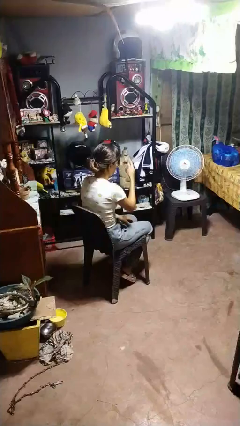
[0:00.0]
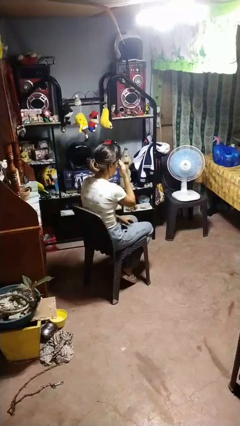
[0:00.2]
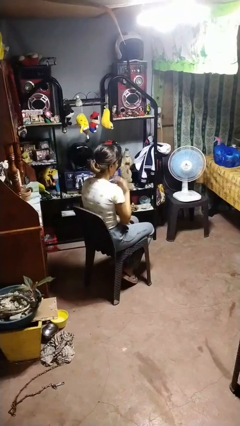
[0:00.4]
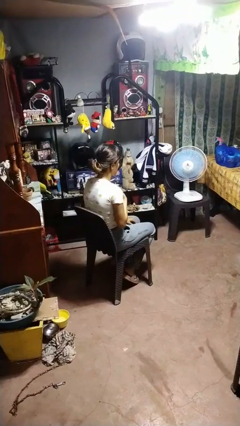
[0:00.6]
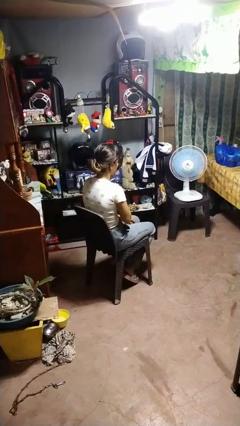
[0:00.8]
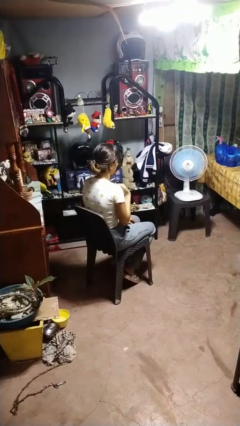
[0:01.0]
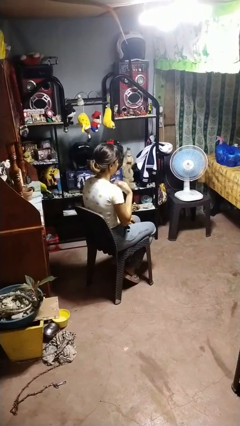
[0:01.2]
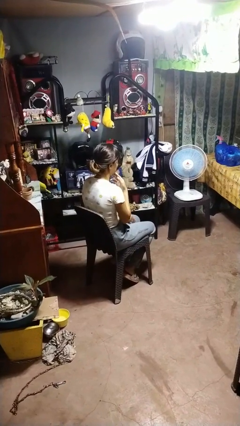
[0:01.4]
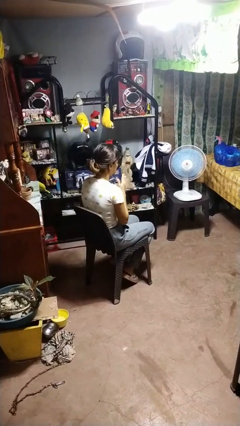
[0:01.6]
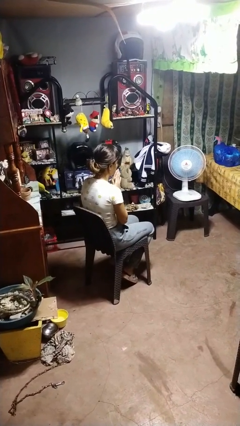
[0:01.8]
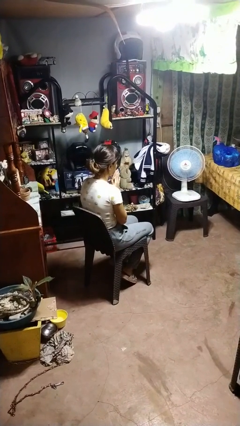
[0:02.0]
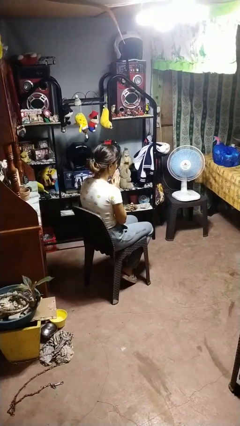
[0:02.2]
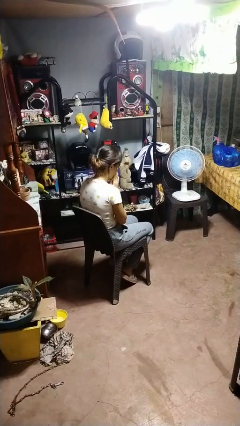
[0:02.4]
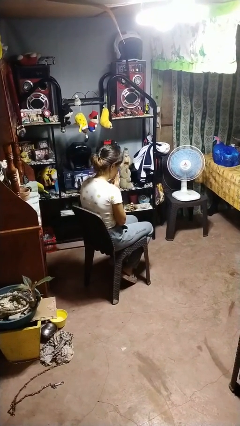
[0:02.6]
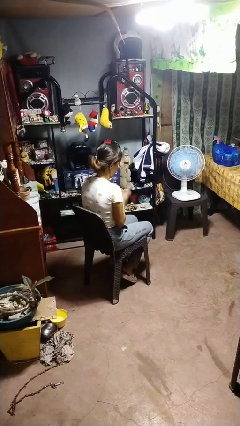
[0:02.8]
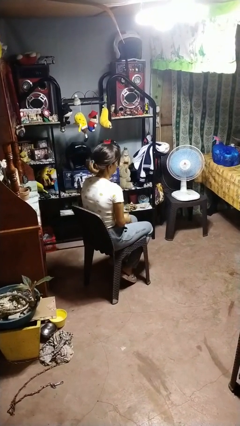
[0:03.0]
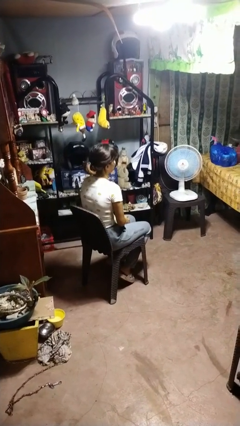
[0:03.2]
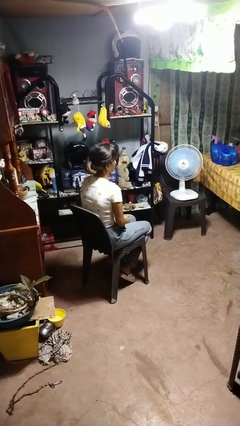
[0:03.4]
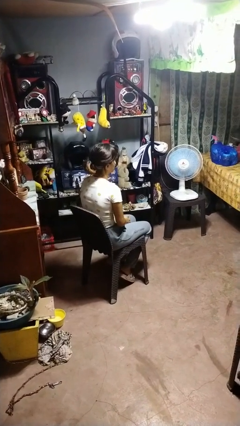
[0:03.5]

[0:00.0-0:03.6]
person prays

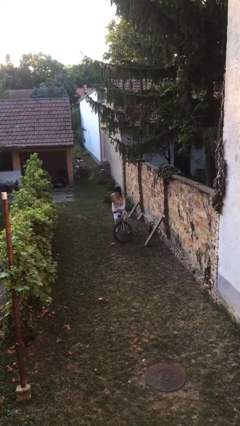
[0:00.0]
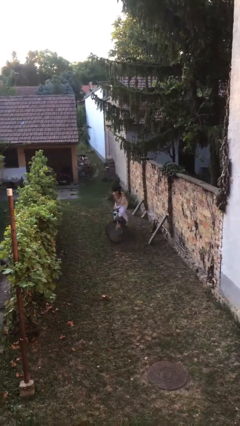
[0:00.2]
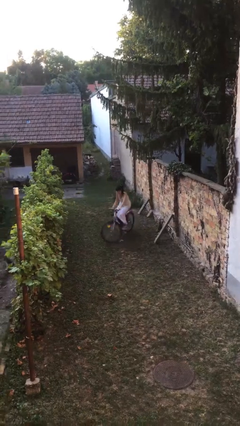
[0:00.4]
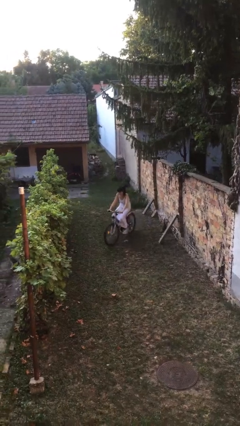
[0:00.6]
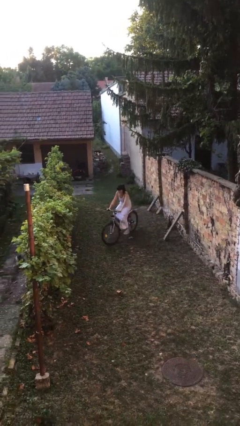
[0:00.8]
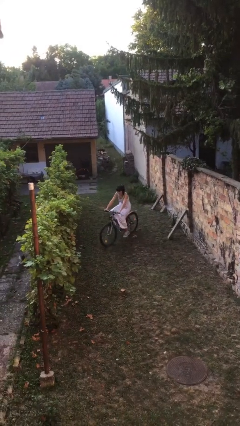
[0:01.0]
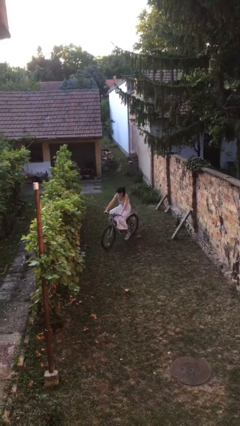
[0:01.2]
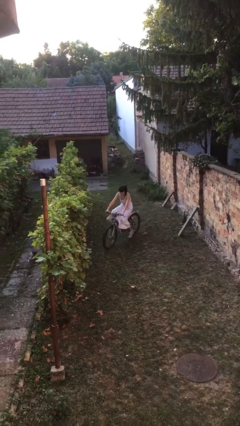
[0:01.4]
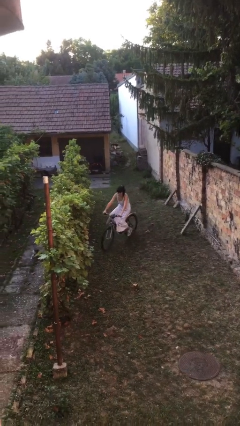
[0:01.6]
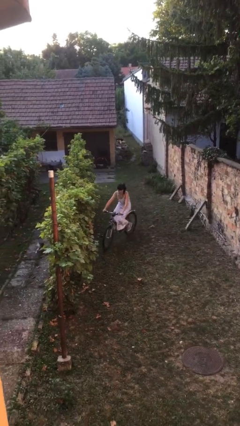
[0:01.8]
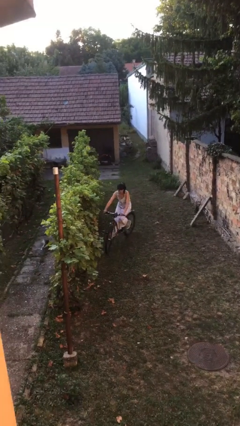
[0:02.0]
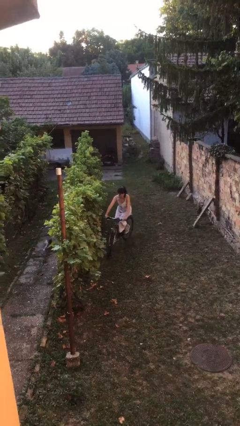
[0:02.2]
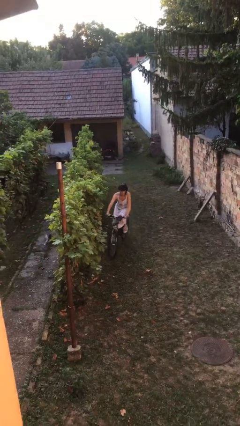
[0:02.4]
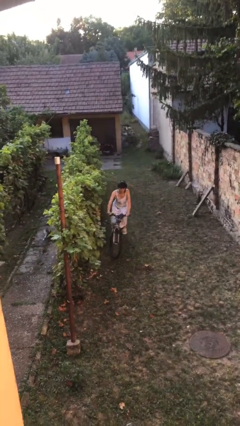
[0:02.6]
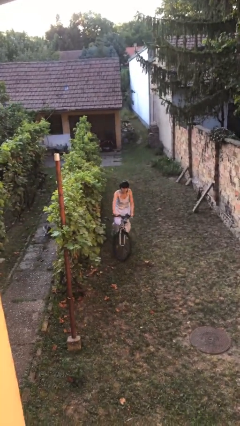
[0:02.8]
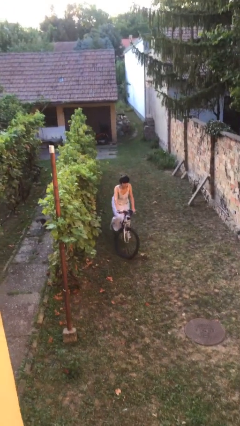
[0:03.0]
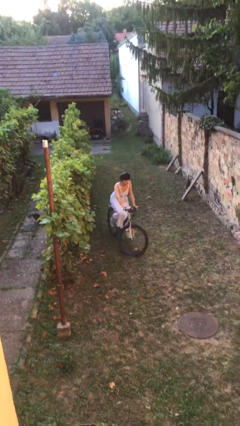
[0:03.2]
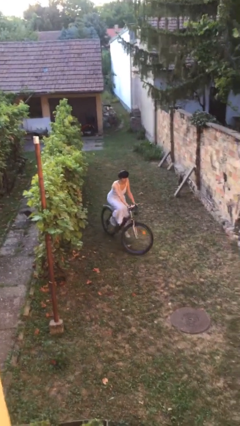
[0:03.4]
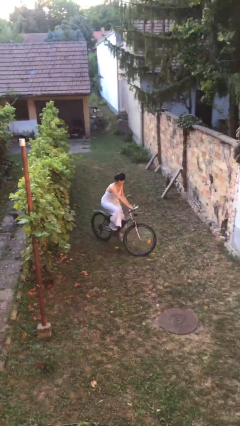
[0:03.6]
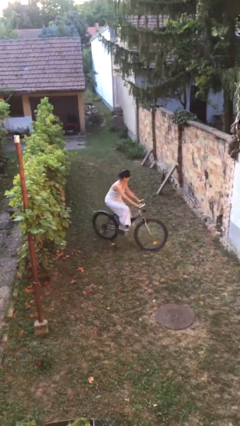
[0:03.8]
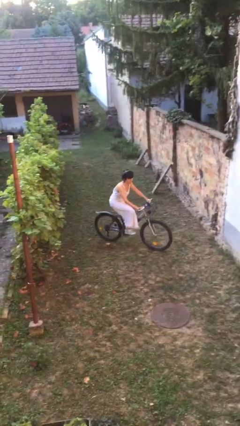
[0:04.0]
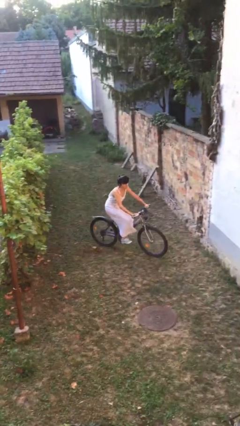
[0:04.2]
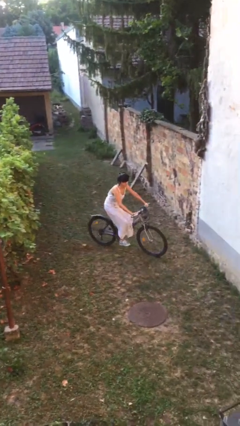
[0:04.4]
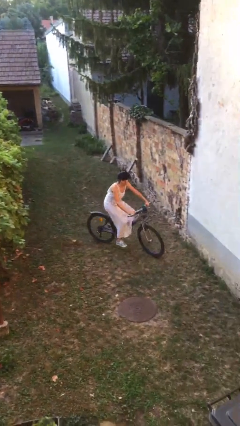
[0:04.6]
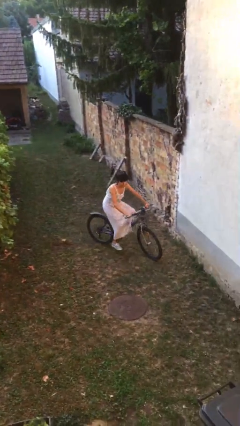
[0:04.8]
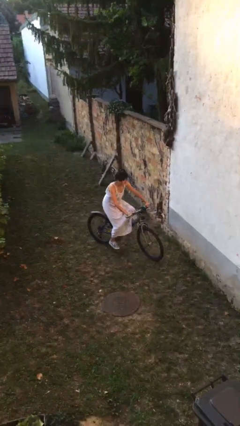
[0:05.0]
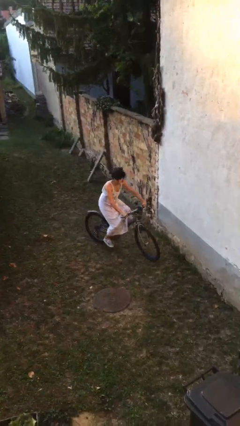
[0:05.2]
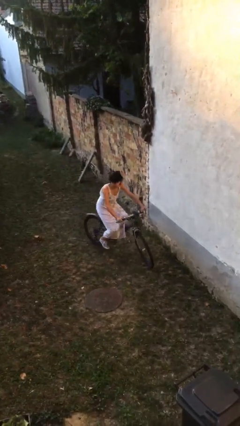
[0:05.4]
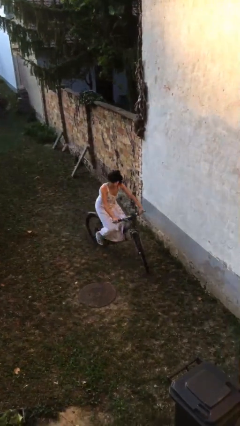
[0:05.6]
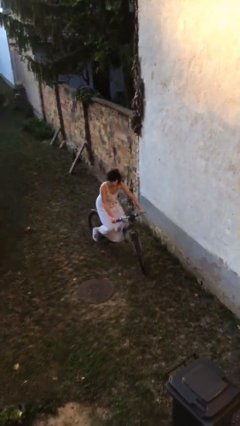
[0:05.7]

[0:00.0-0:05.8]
person rides bicycle

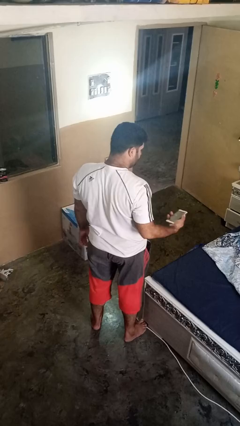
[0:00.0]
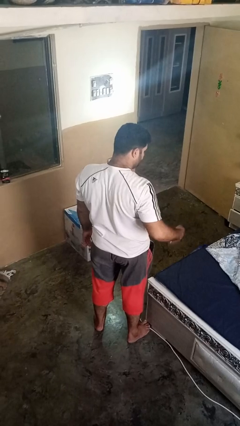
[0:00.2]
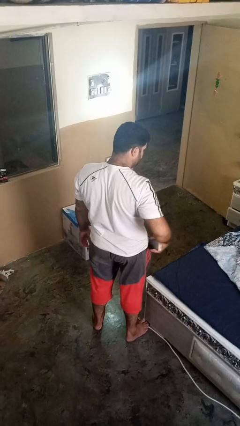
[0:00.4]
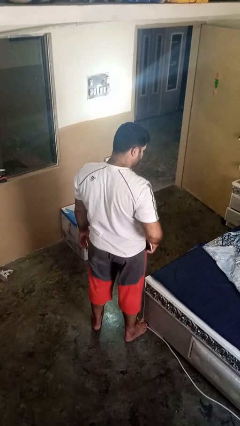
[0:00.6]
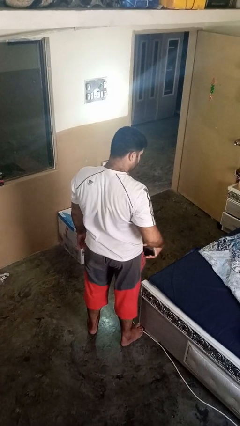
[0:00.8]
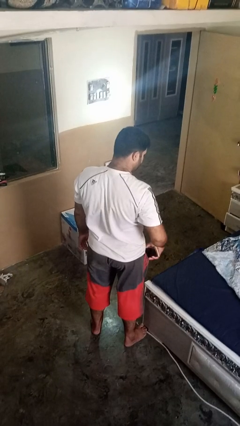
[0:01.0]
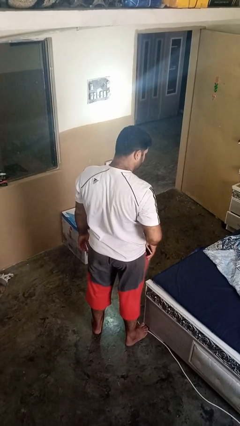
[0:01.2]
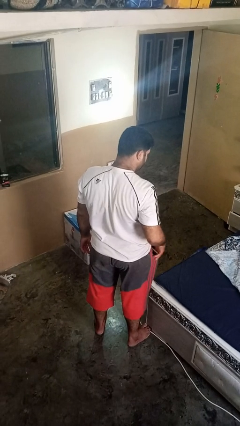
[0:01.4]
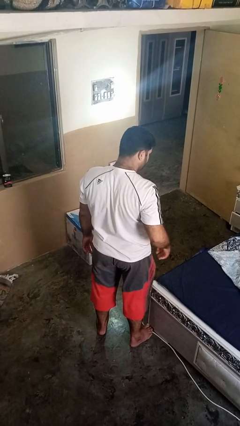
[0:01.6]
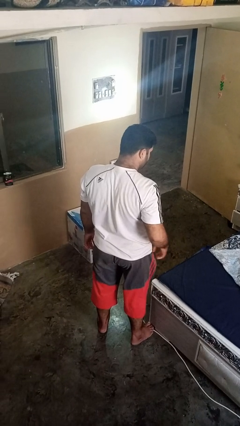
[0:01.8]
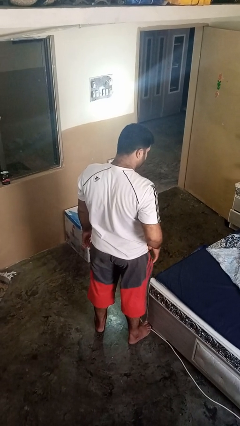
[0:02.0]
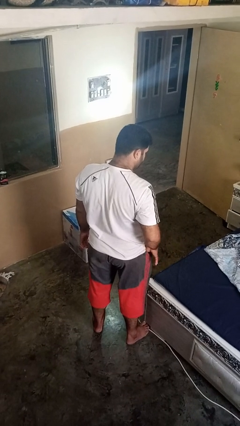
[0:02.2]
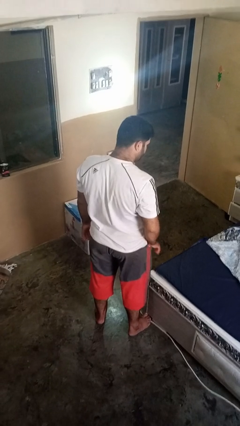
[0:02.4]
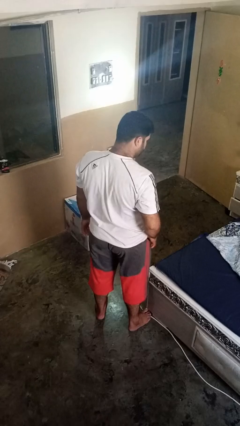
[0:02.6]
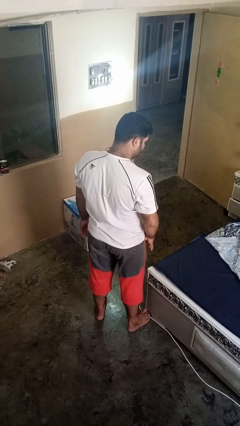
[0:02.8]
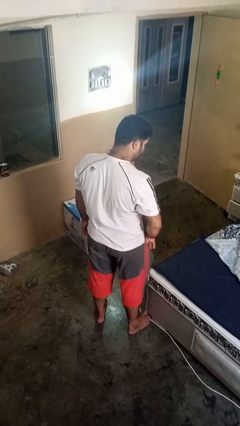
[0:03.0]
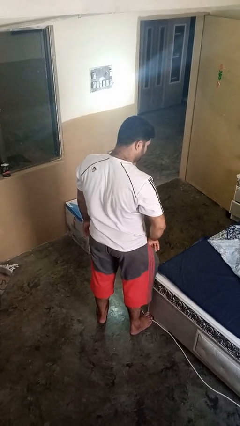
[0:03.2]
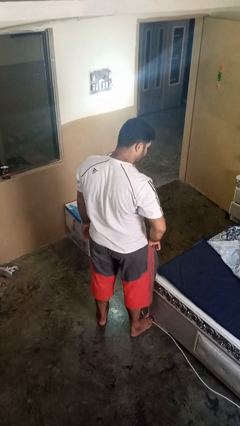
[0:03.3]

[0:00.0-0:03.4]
person puts phone into pocket

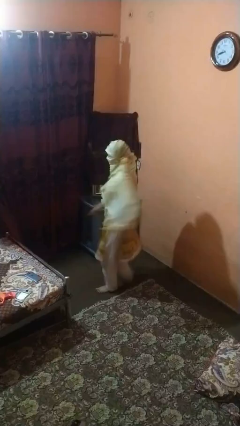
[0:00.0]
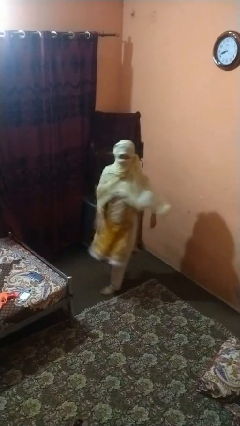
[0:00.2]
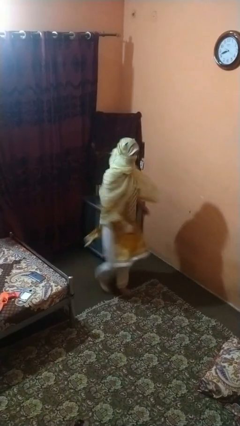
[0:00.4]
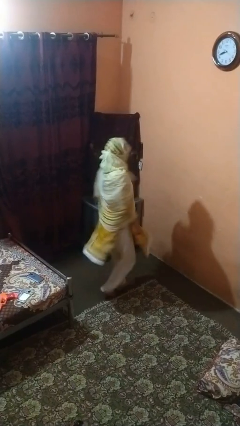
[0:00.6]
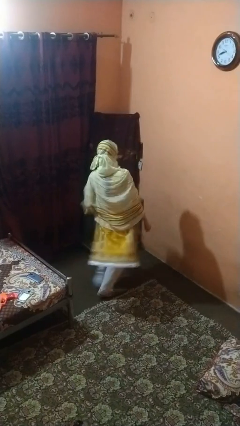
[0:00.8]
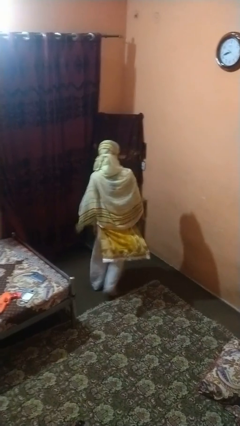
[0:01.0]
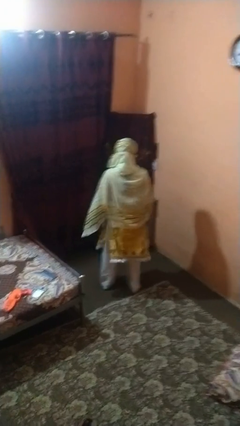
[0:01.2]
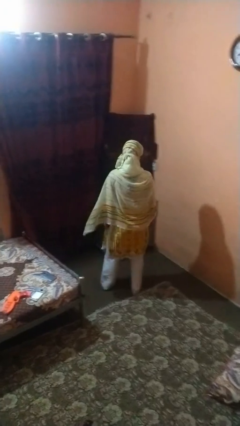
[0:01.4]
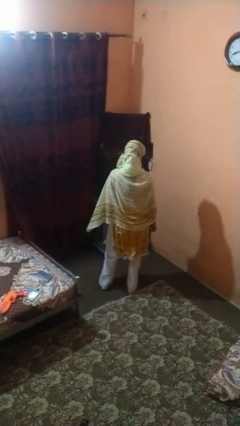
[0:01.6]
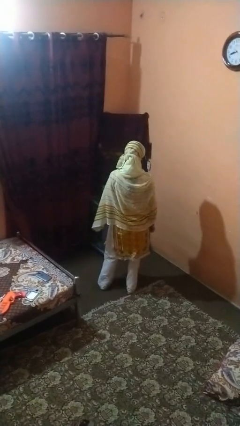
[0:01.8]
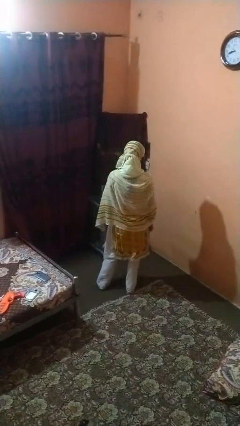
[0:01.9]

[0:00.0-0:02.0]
person twirls

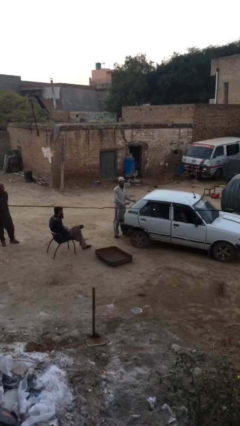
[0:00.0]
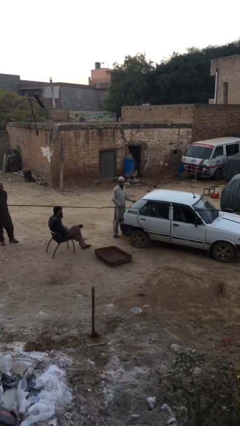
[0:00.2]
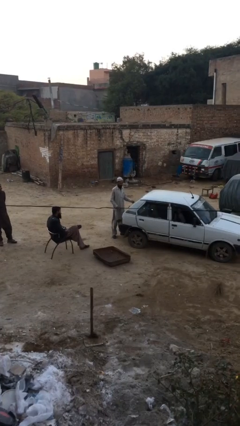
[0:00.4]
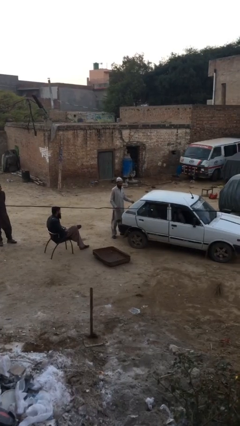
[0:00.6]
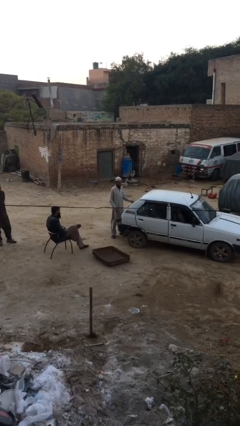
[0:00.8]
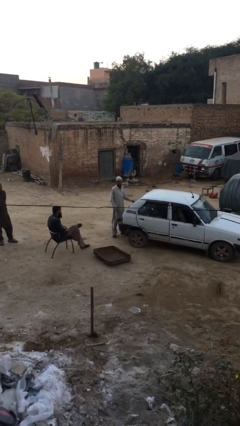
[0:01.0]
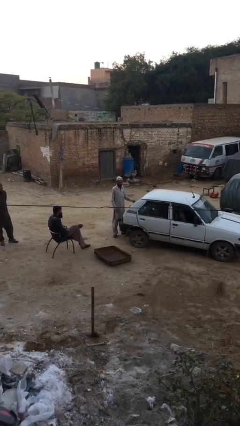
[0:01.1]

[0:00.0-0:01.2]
person closes car trunk

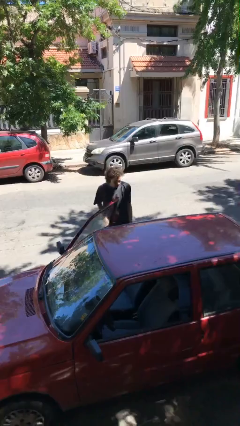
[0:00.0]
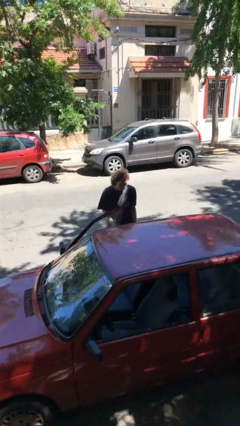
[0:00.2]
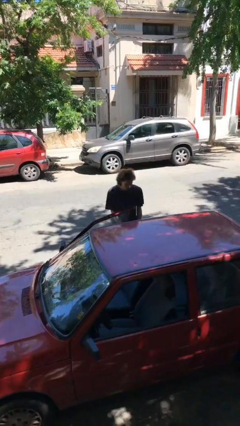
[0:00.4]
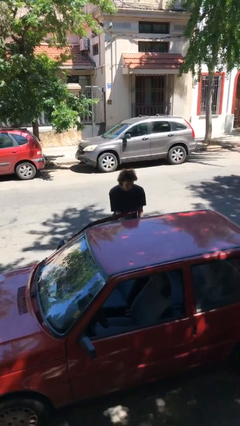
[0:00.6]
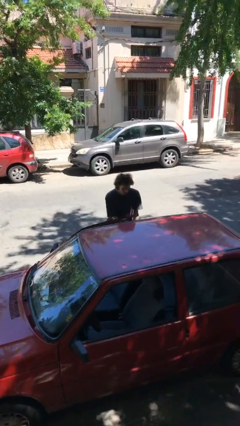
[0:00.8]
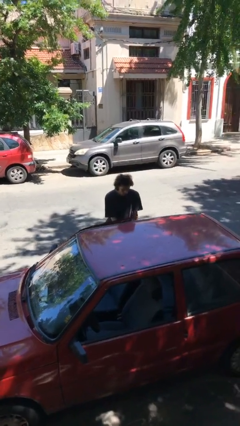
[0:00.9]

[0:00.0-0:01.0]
person closes car door

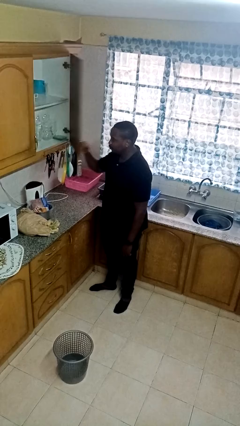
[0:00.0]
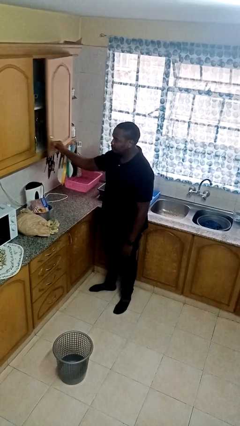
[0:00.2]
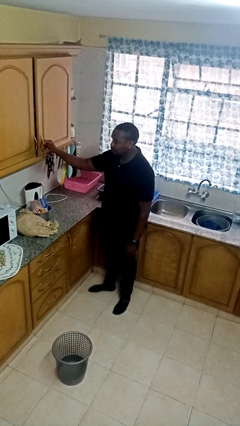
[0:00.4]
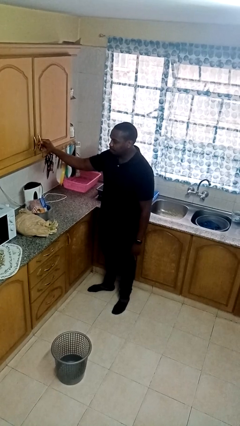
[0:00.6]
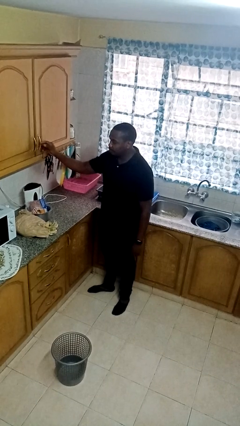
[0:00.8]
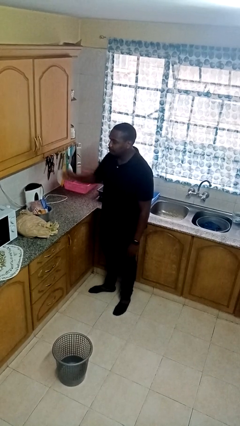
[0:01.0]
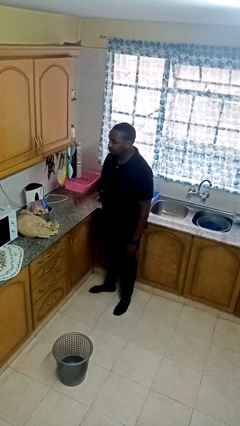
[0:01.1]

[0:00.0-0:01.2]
person closes cabinet
